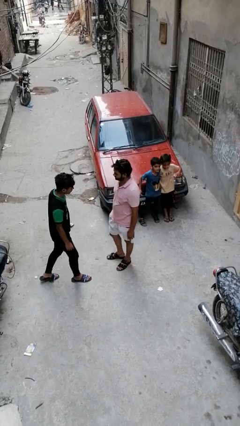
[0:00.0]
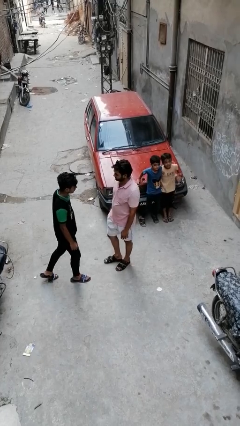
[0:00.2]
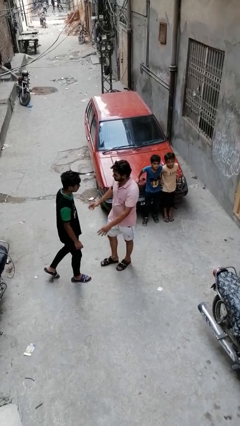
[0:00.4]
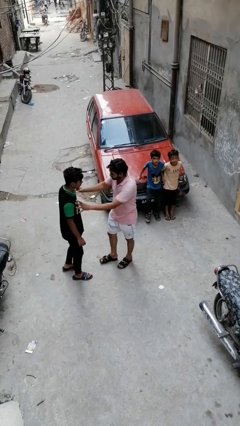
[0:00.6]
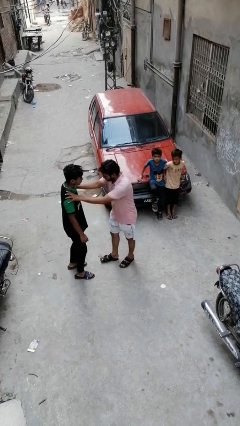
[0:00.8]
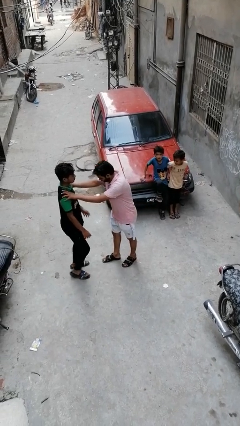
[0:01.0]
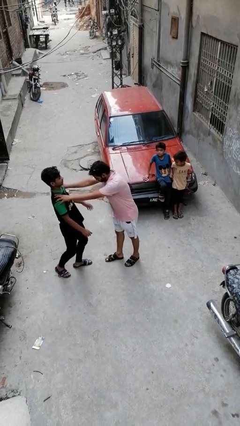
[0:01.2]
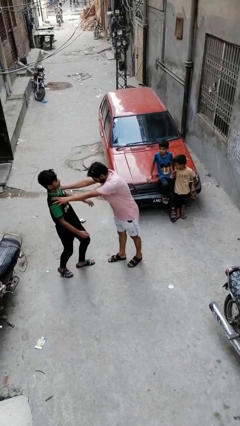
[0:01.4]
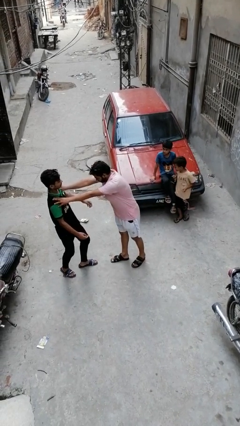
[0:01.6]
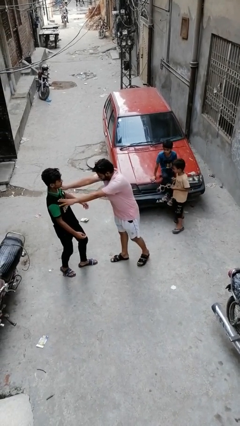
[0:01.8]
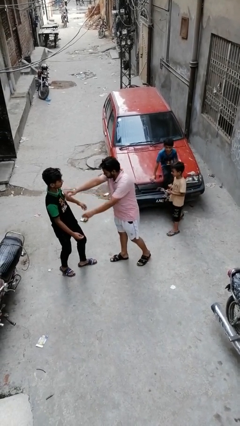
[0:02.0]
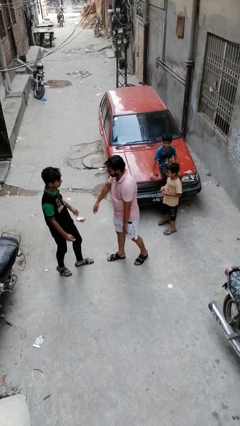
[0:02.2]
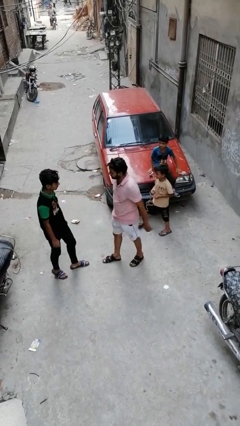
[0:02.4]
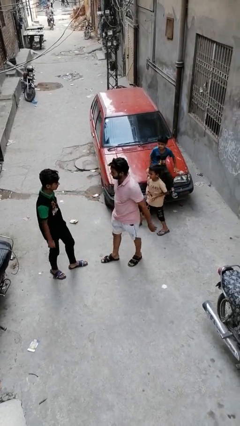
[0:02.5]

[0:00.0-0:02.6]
person shoves person

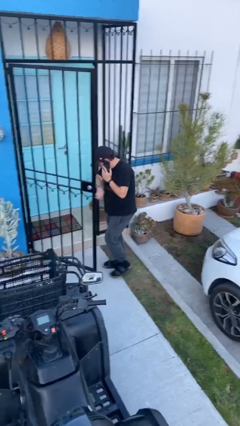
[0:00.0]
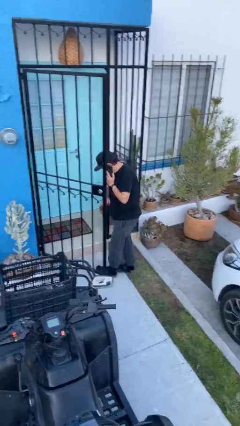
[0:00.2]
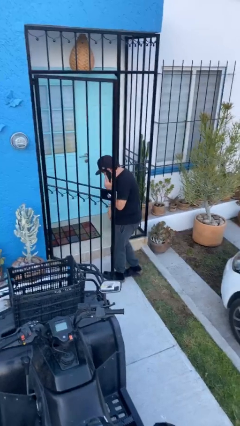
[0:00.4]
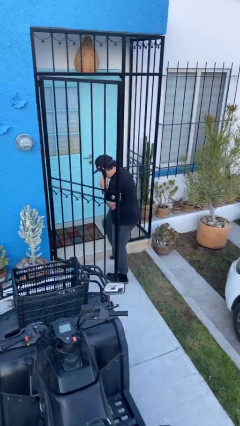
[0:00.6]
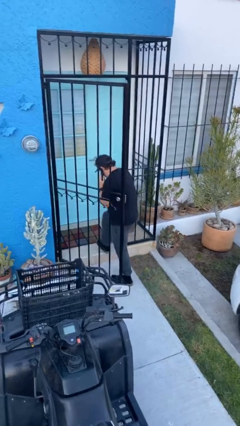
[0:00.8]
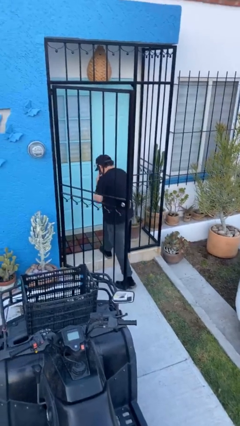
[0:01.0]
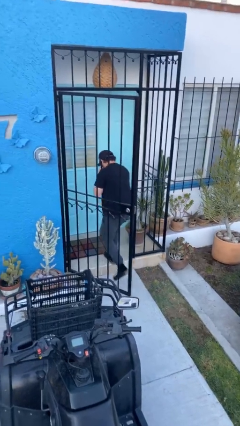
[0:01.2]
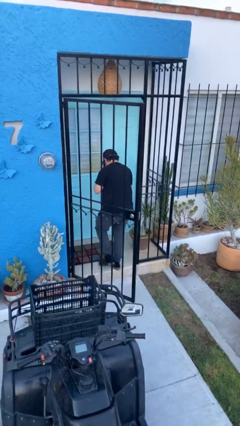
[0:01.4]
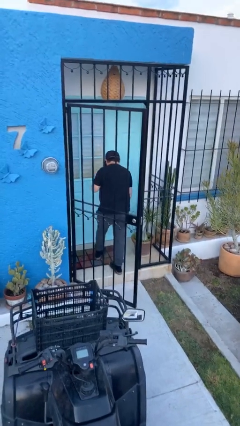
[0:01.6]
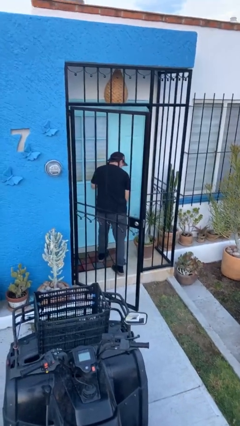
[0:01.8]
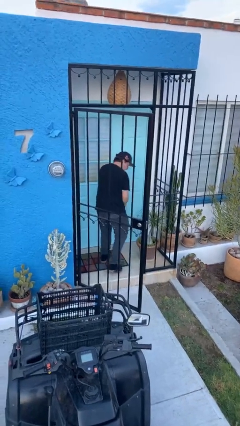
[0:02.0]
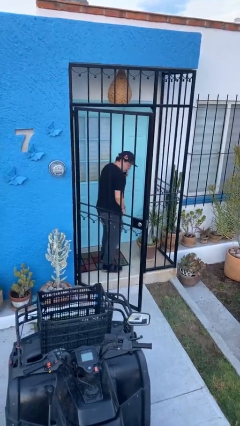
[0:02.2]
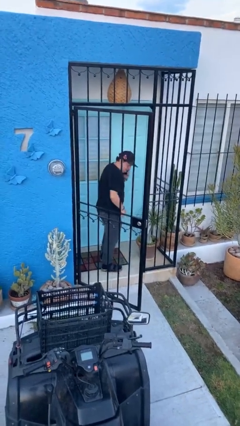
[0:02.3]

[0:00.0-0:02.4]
person exits scene through structure

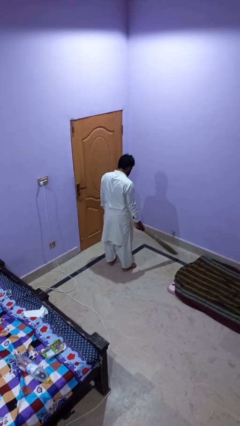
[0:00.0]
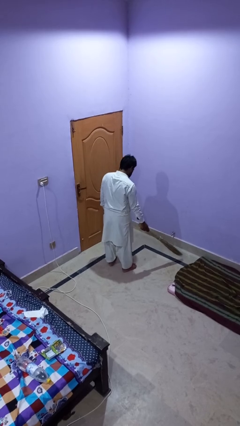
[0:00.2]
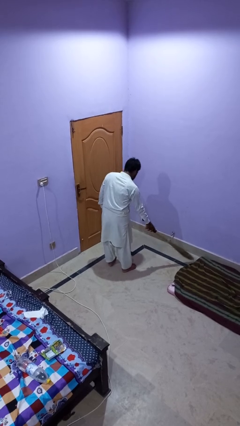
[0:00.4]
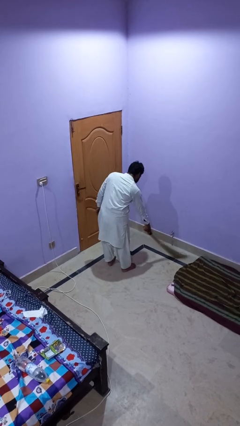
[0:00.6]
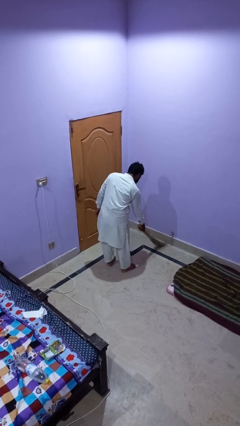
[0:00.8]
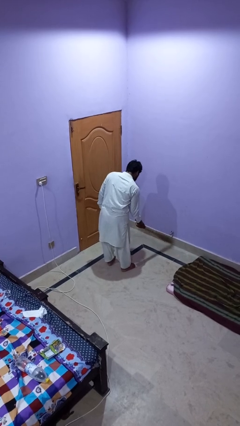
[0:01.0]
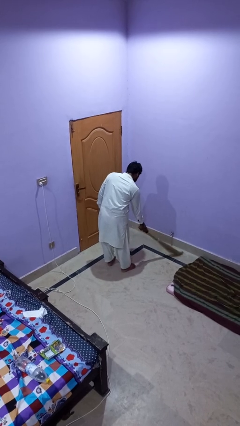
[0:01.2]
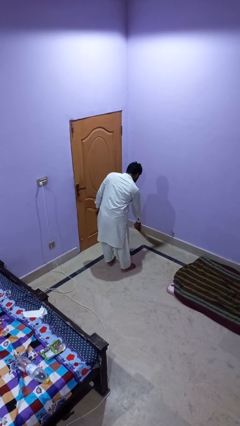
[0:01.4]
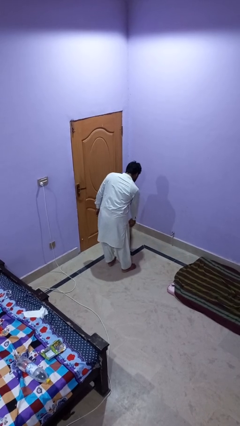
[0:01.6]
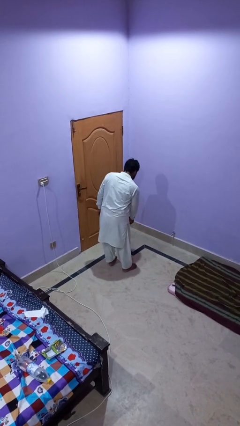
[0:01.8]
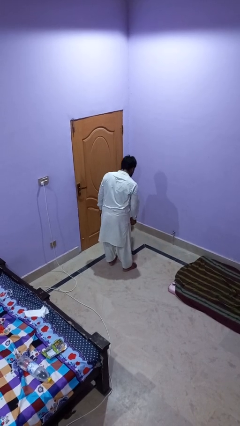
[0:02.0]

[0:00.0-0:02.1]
person sweeps floor

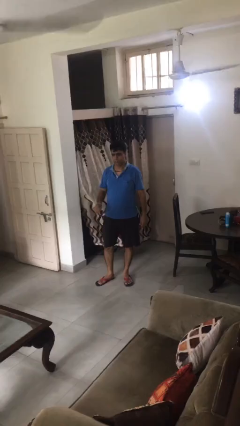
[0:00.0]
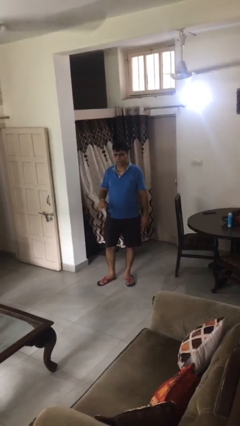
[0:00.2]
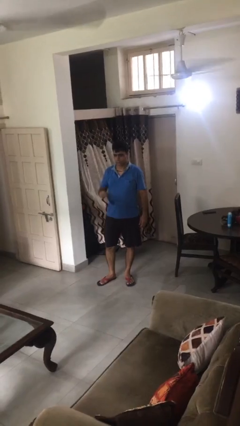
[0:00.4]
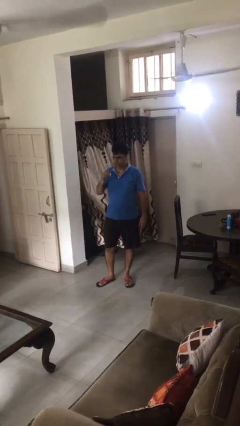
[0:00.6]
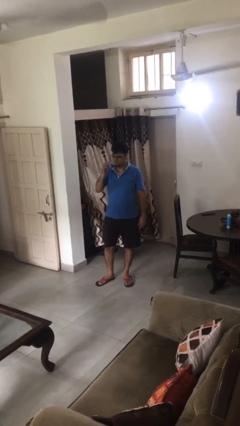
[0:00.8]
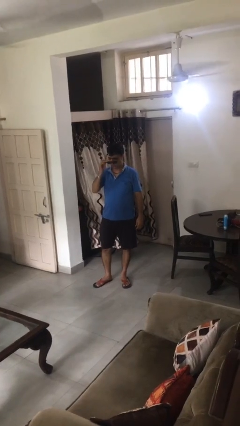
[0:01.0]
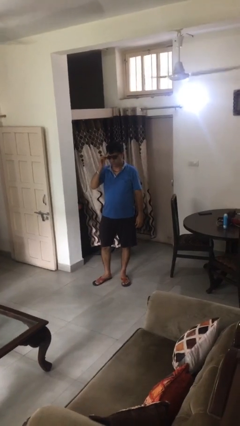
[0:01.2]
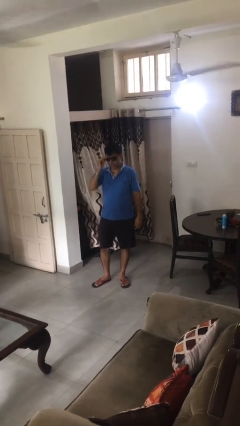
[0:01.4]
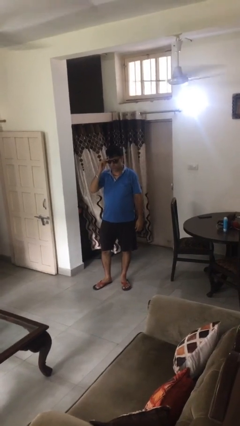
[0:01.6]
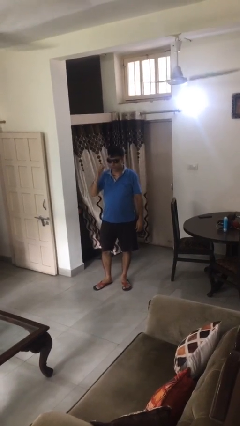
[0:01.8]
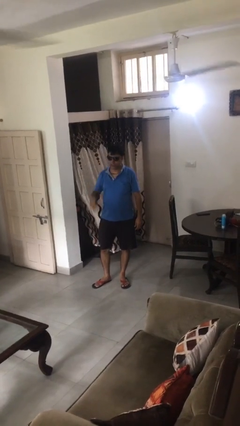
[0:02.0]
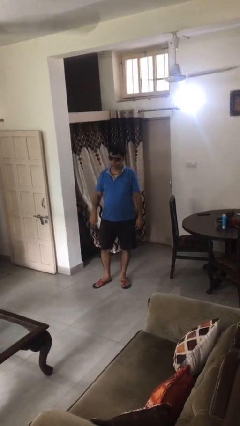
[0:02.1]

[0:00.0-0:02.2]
person puts on sunglasses

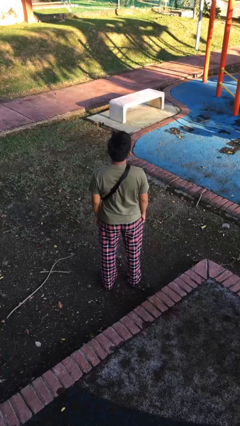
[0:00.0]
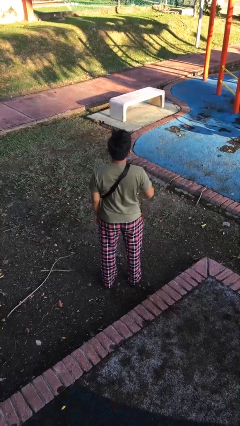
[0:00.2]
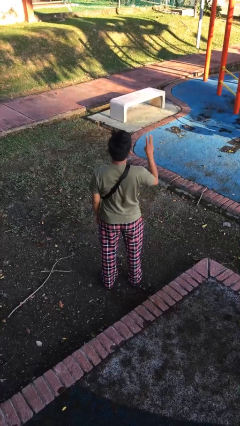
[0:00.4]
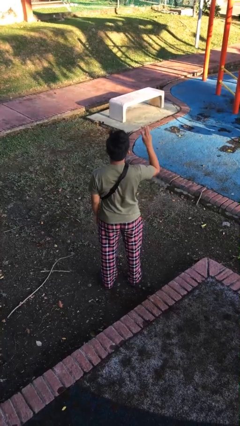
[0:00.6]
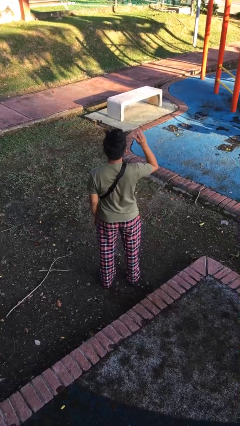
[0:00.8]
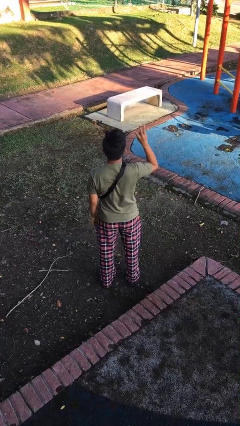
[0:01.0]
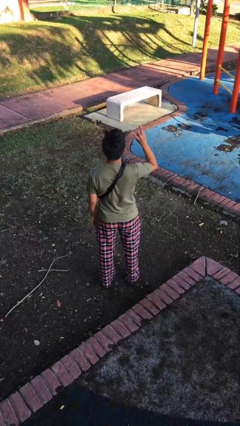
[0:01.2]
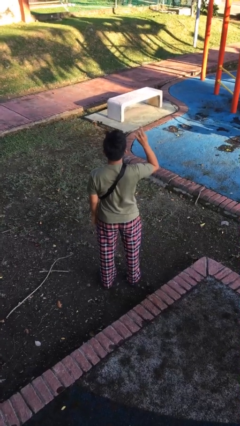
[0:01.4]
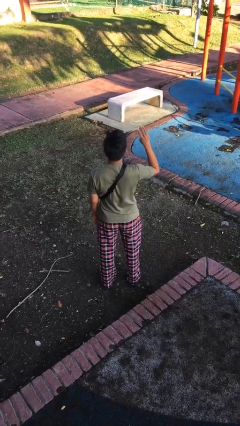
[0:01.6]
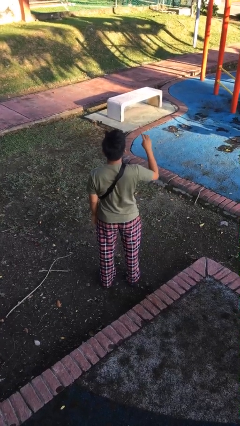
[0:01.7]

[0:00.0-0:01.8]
person gestures number three

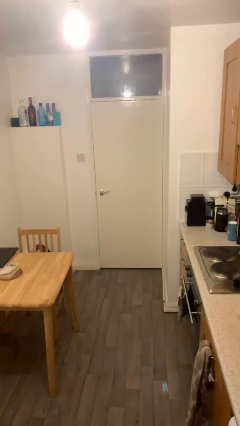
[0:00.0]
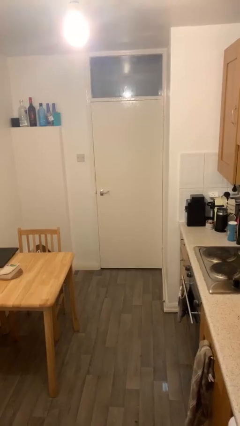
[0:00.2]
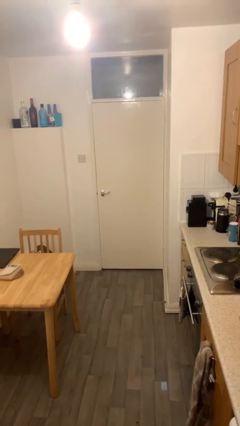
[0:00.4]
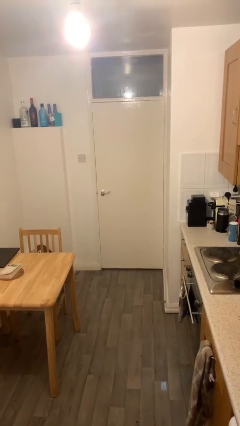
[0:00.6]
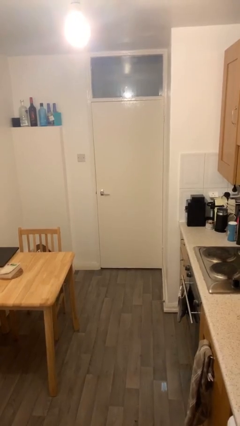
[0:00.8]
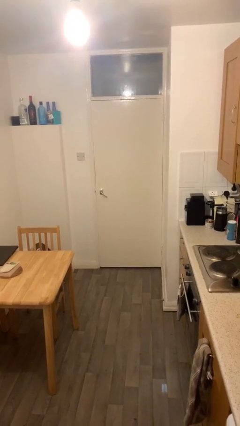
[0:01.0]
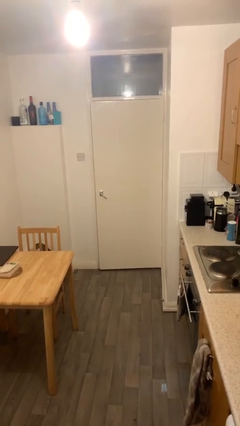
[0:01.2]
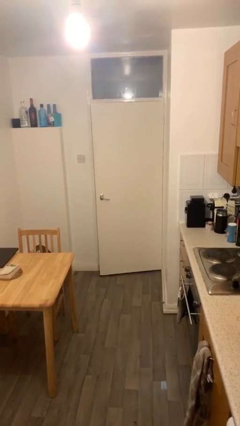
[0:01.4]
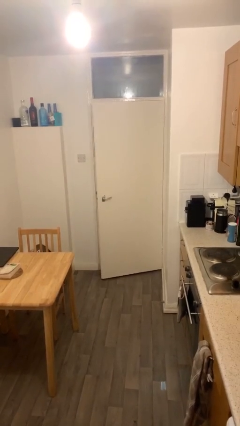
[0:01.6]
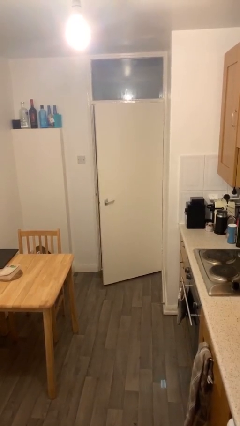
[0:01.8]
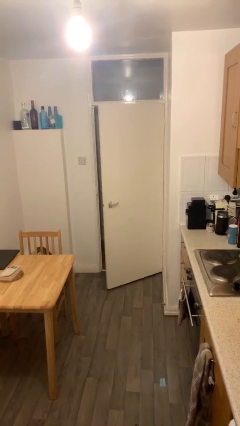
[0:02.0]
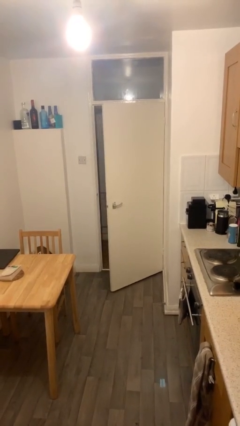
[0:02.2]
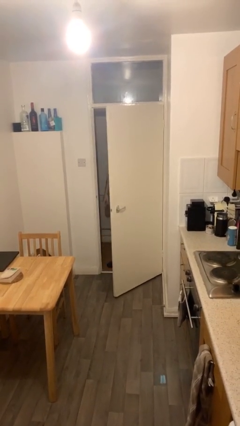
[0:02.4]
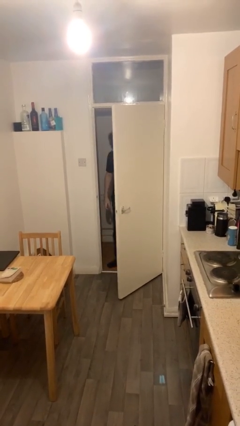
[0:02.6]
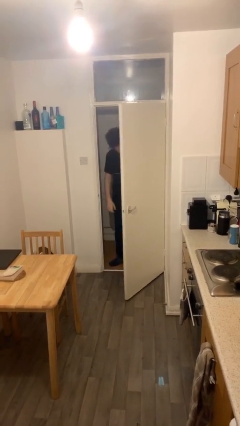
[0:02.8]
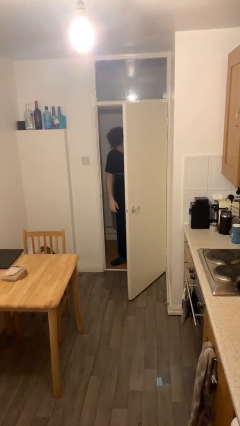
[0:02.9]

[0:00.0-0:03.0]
person opens facility door

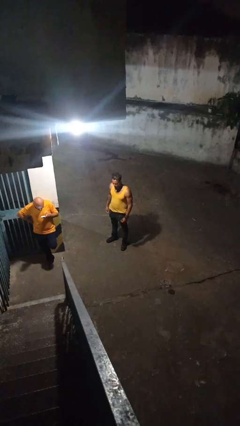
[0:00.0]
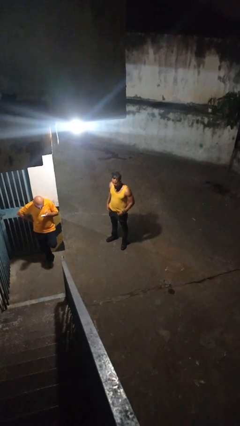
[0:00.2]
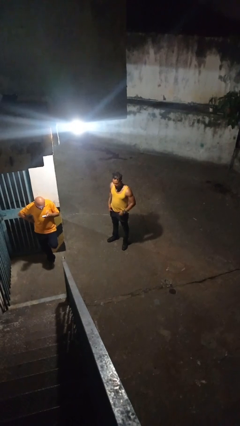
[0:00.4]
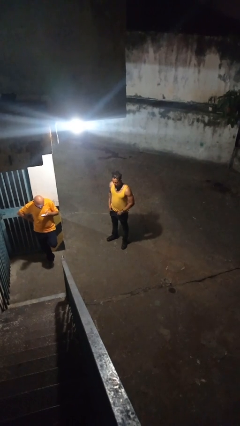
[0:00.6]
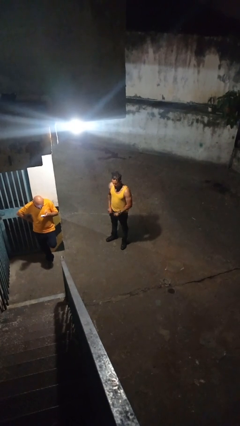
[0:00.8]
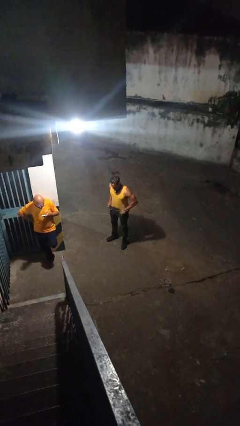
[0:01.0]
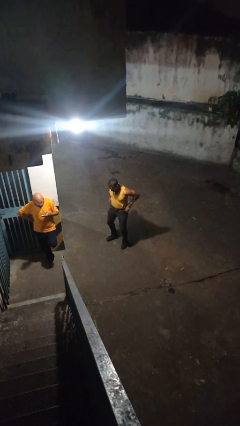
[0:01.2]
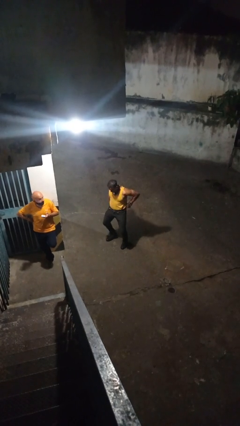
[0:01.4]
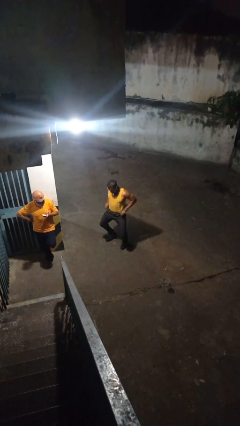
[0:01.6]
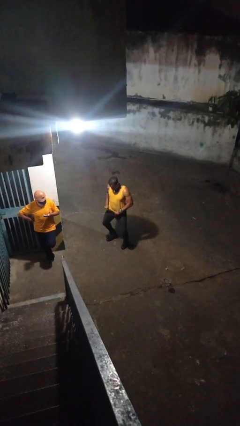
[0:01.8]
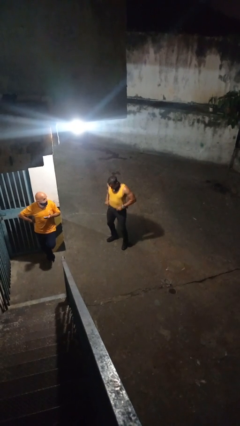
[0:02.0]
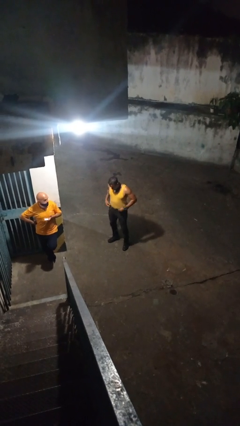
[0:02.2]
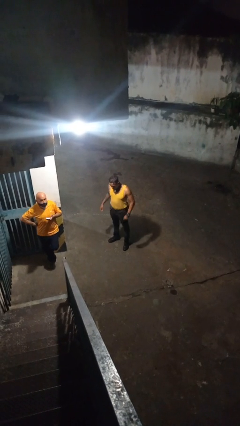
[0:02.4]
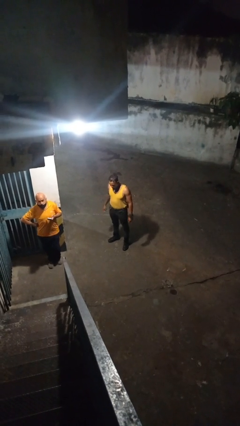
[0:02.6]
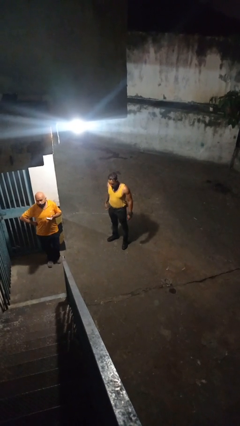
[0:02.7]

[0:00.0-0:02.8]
person hikes up pants
